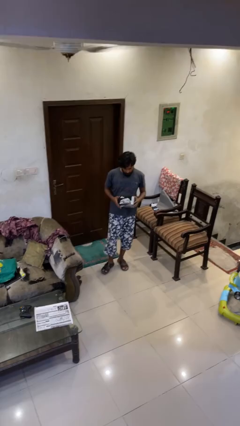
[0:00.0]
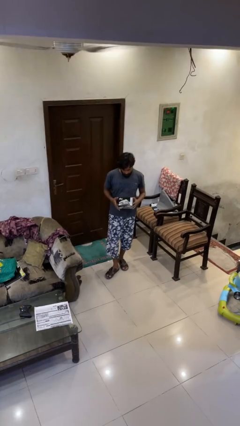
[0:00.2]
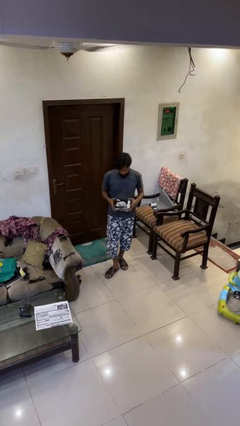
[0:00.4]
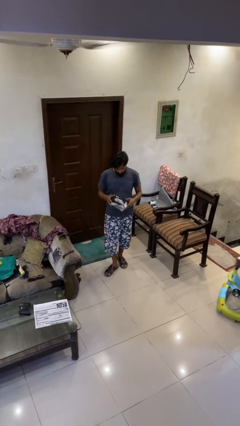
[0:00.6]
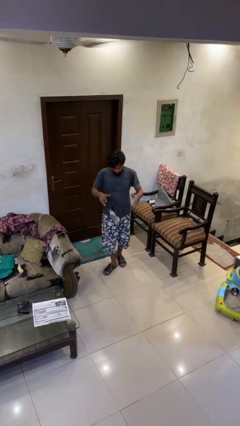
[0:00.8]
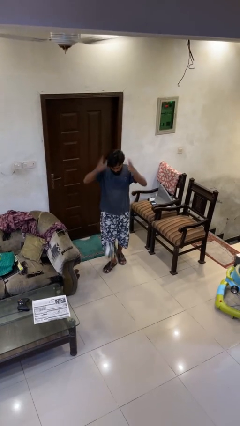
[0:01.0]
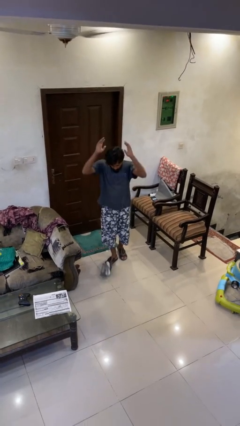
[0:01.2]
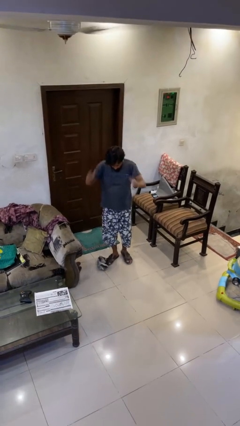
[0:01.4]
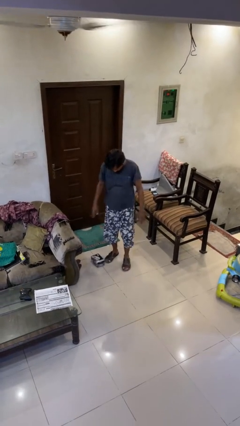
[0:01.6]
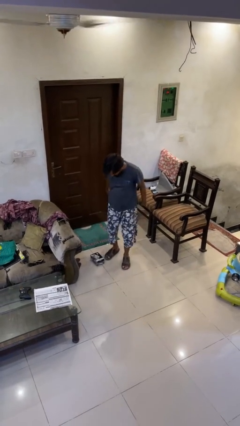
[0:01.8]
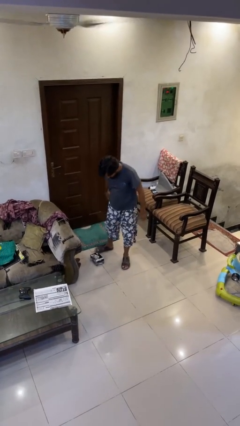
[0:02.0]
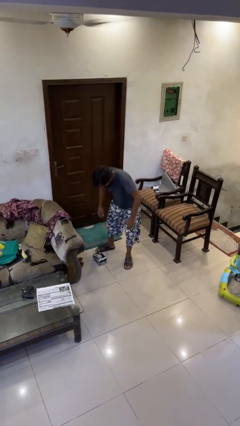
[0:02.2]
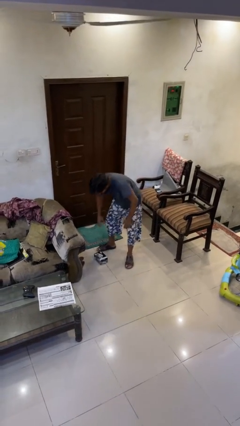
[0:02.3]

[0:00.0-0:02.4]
person drops object

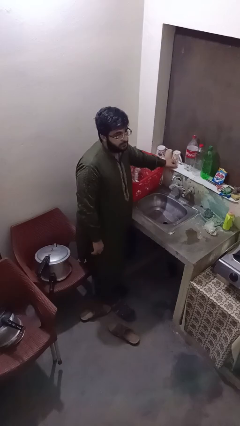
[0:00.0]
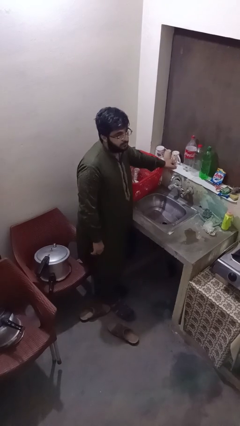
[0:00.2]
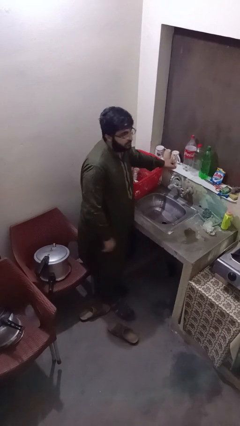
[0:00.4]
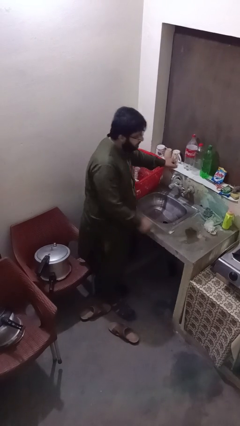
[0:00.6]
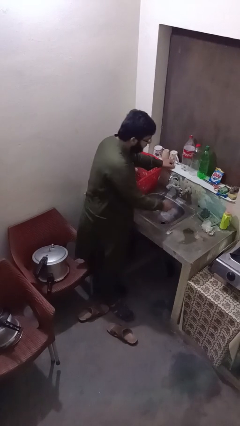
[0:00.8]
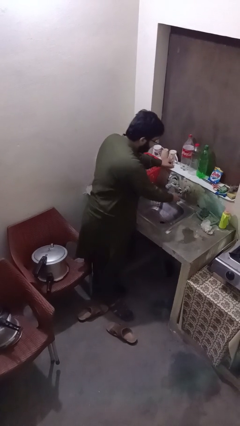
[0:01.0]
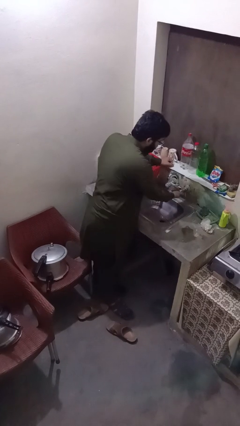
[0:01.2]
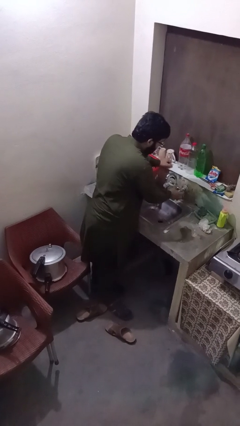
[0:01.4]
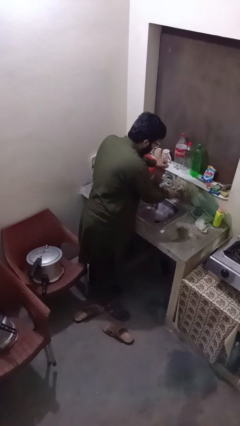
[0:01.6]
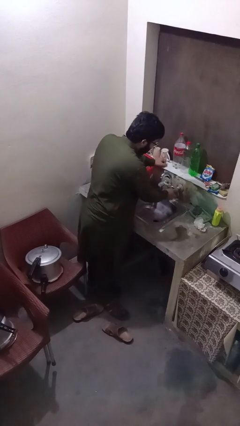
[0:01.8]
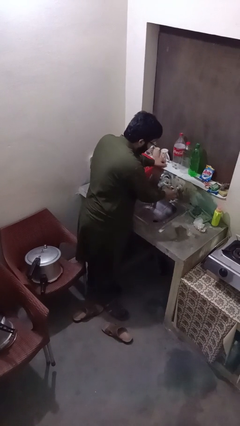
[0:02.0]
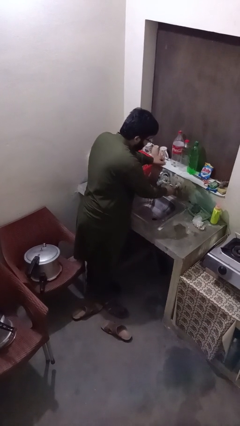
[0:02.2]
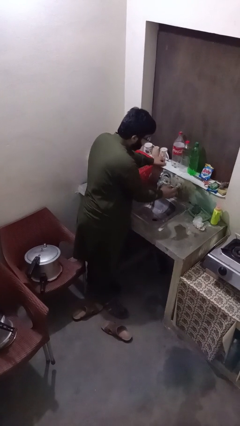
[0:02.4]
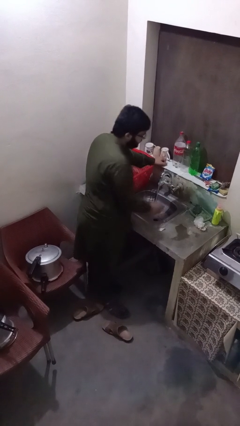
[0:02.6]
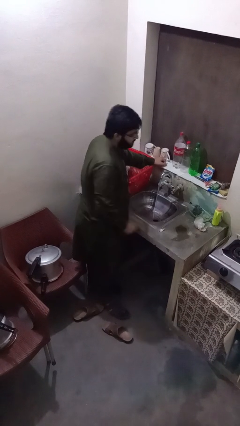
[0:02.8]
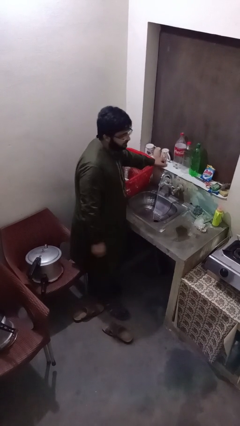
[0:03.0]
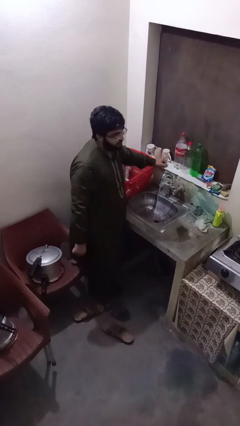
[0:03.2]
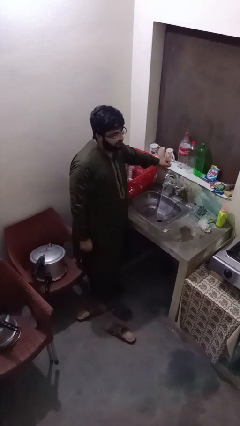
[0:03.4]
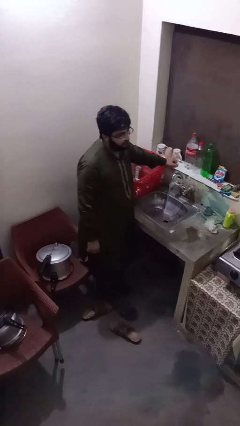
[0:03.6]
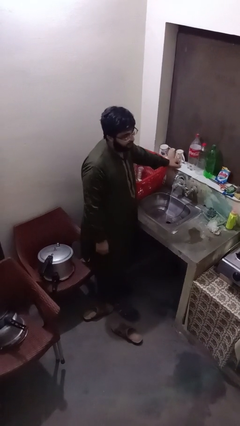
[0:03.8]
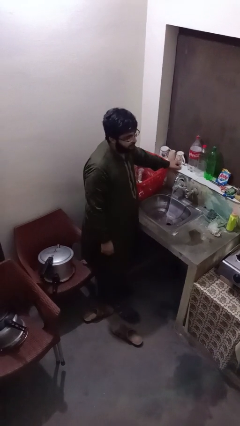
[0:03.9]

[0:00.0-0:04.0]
person turns on faucet

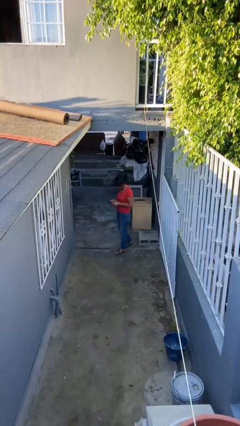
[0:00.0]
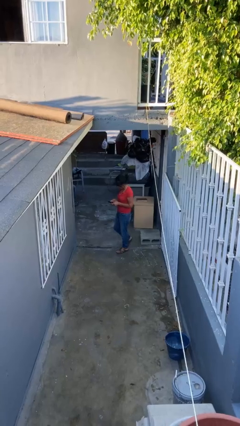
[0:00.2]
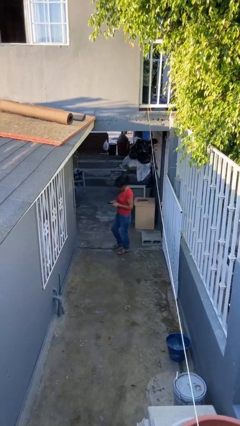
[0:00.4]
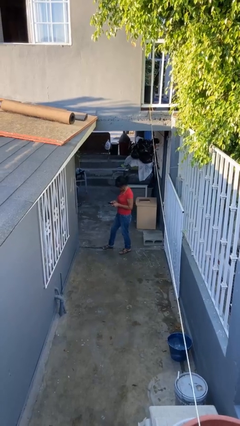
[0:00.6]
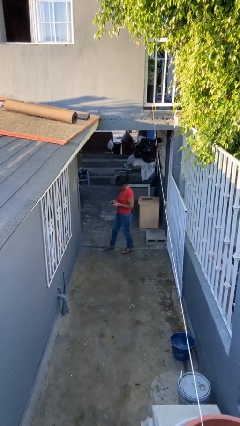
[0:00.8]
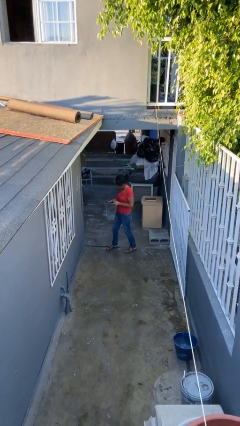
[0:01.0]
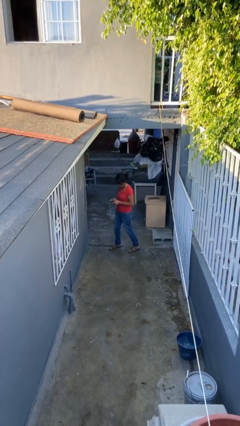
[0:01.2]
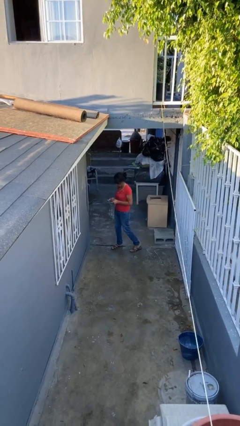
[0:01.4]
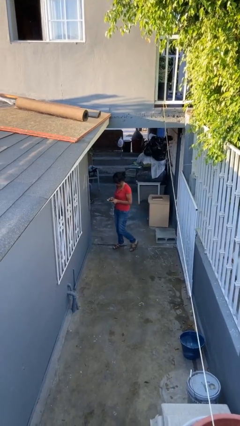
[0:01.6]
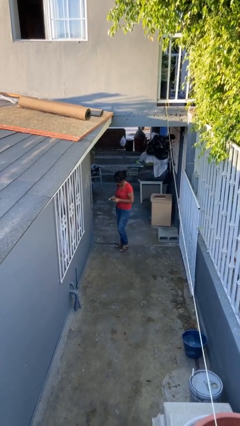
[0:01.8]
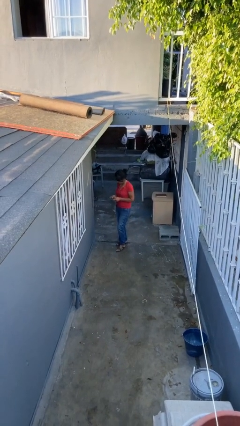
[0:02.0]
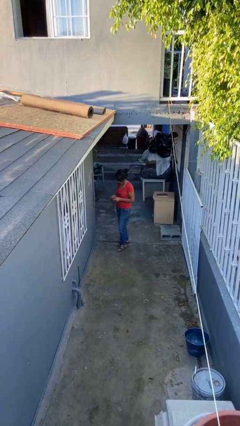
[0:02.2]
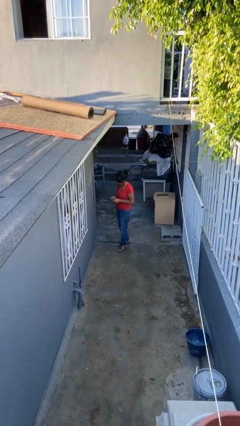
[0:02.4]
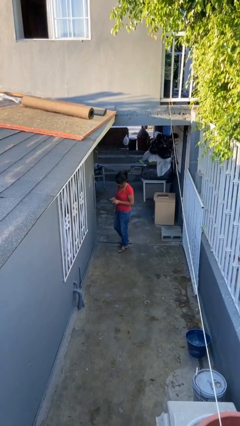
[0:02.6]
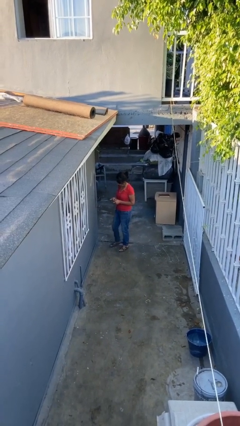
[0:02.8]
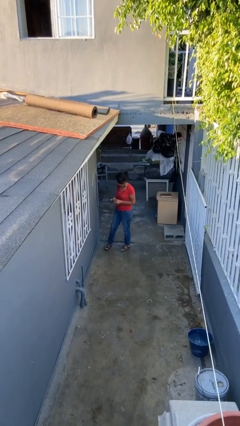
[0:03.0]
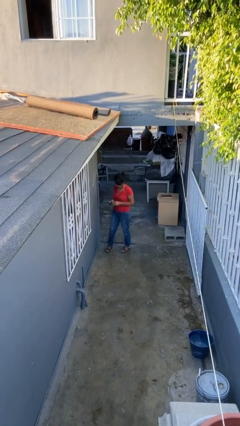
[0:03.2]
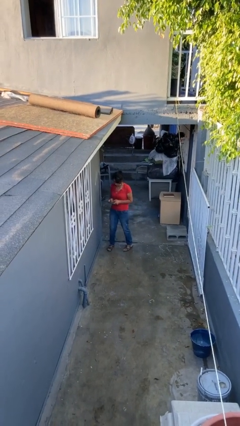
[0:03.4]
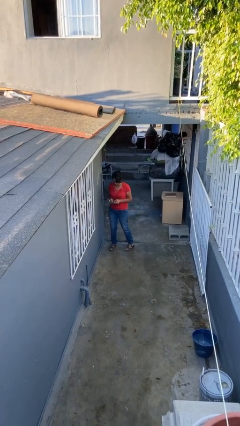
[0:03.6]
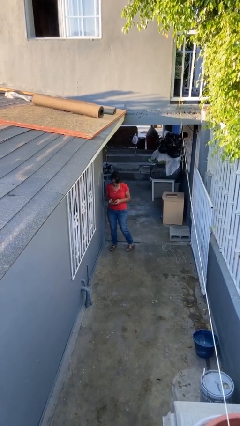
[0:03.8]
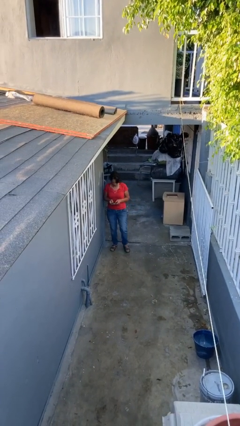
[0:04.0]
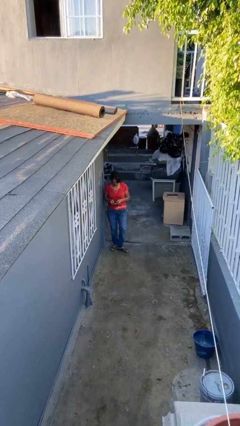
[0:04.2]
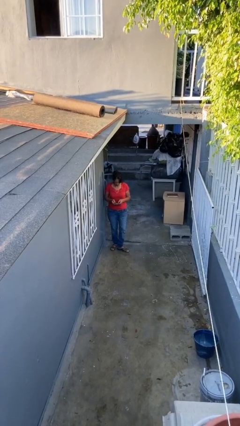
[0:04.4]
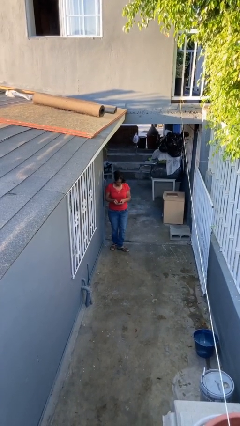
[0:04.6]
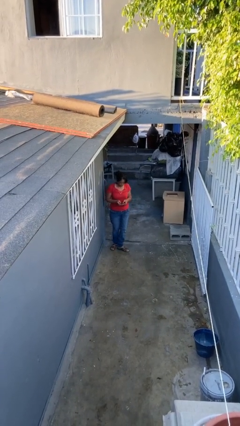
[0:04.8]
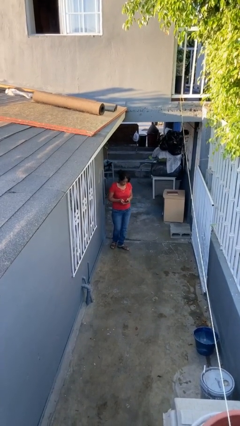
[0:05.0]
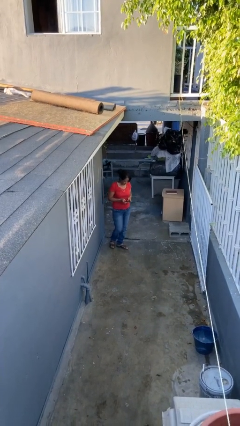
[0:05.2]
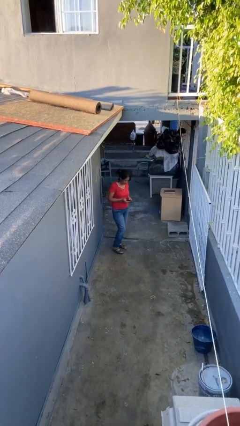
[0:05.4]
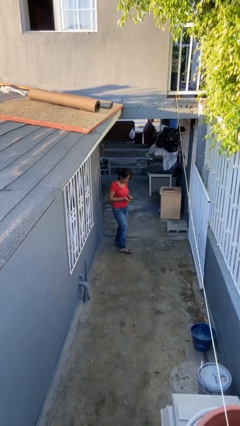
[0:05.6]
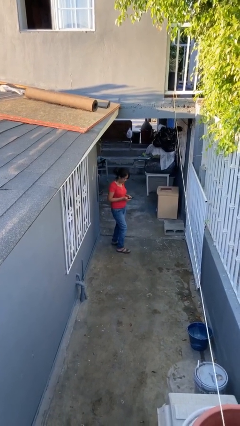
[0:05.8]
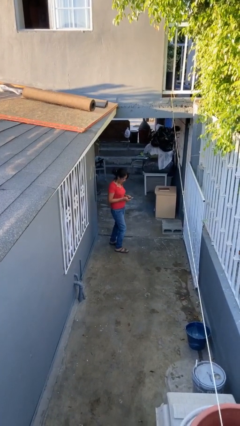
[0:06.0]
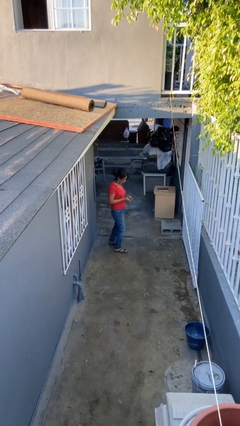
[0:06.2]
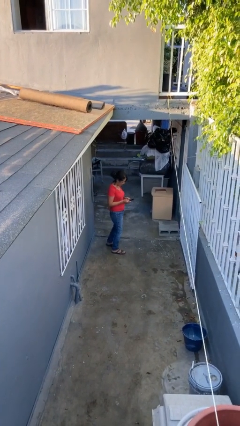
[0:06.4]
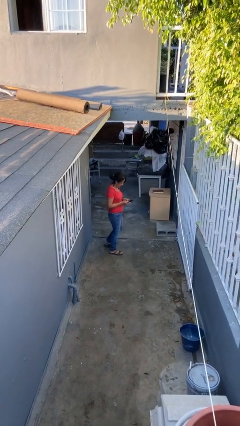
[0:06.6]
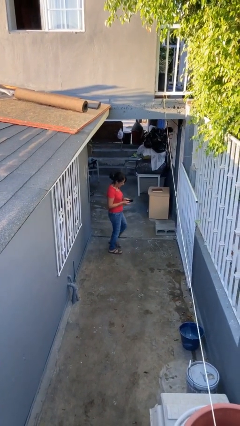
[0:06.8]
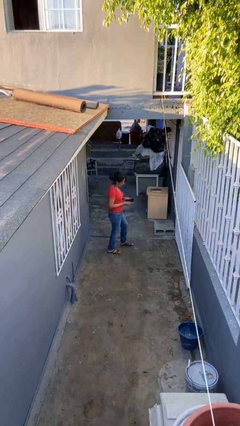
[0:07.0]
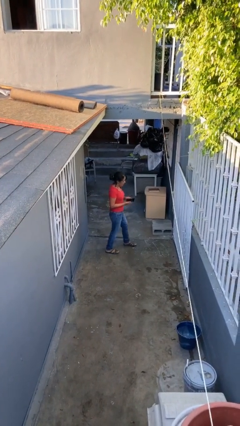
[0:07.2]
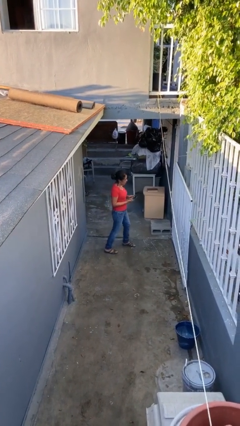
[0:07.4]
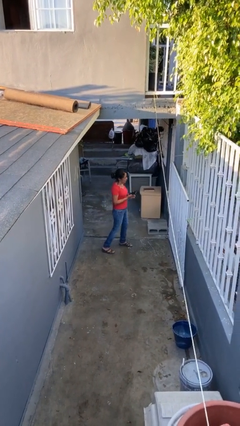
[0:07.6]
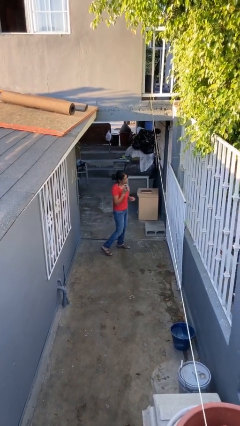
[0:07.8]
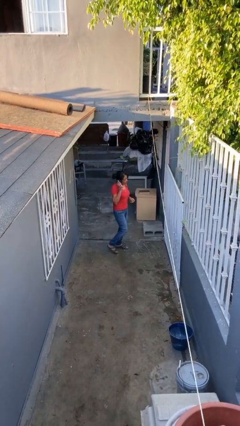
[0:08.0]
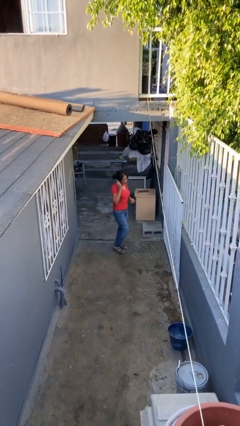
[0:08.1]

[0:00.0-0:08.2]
person texts on phone

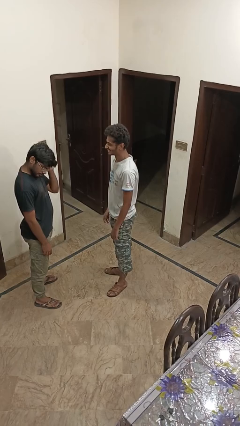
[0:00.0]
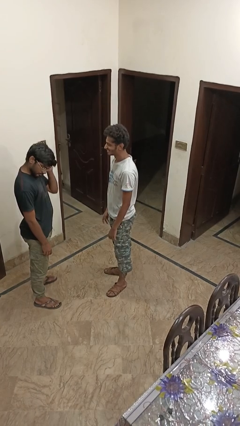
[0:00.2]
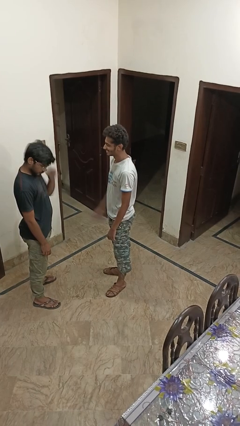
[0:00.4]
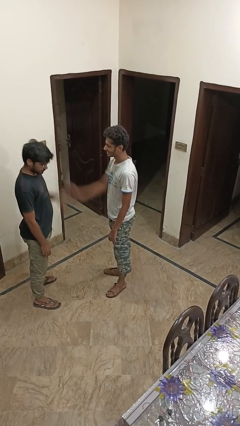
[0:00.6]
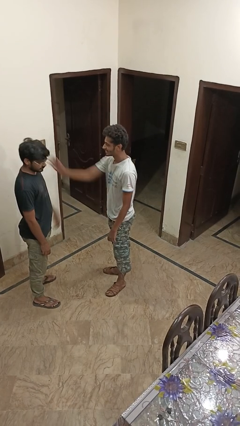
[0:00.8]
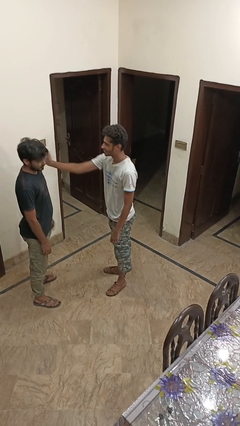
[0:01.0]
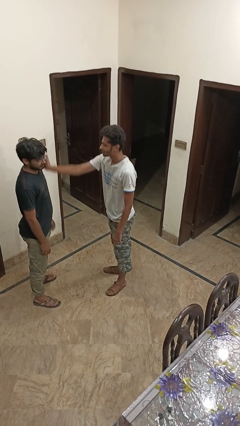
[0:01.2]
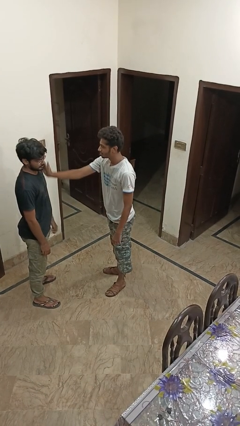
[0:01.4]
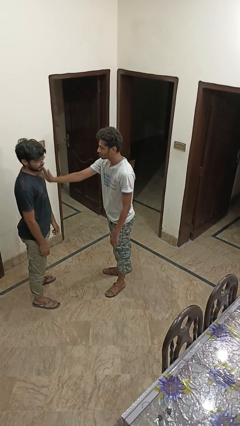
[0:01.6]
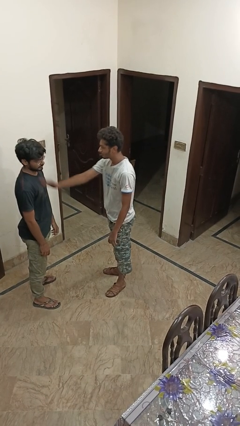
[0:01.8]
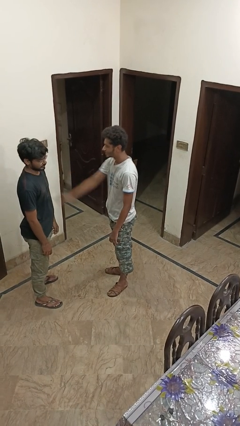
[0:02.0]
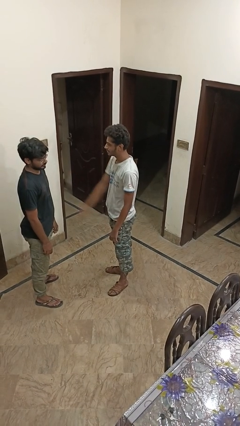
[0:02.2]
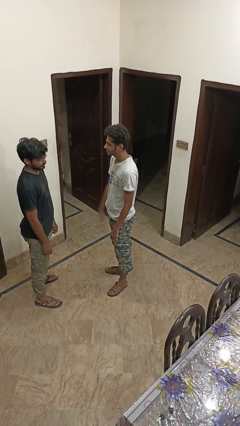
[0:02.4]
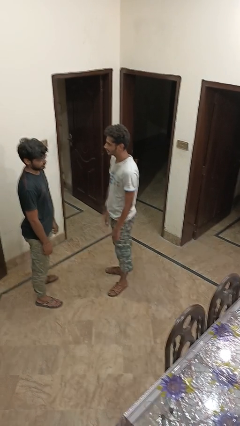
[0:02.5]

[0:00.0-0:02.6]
person touches face of person

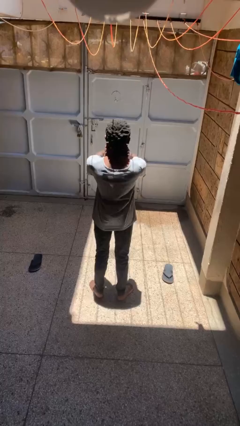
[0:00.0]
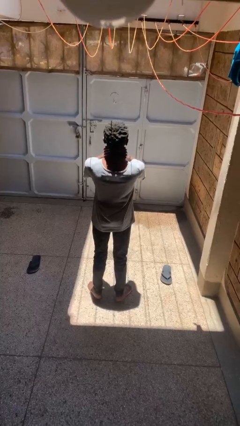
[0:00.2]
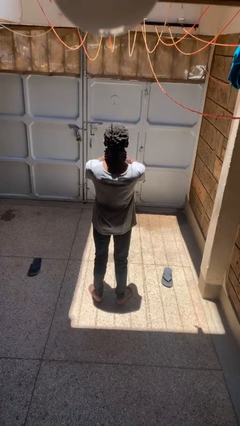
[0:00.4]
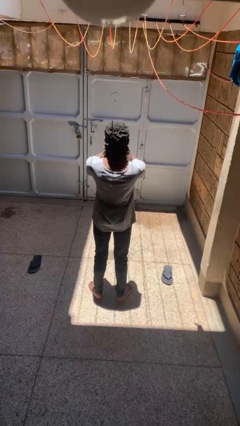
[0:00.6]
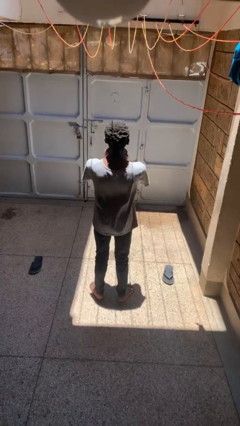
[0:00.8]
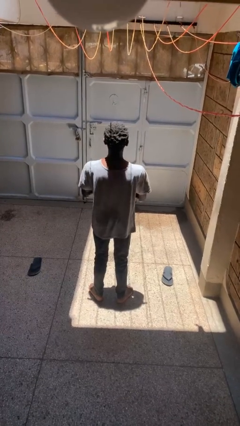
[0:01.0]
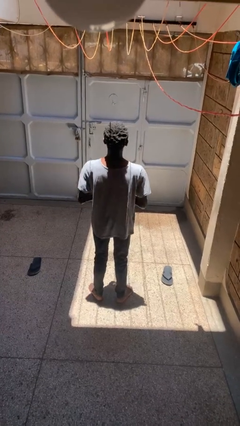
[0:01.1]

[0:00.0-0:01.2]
person rubs neck
